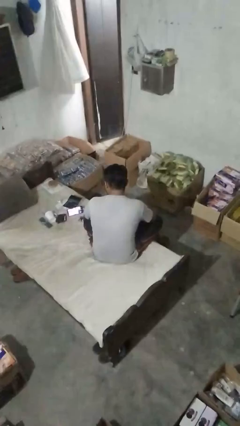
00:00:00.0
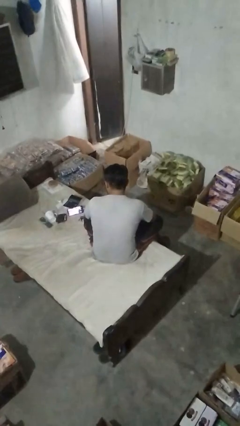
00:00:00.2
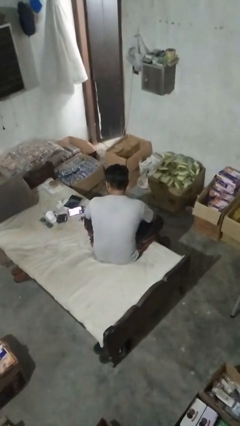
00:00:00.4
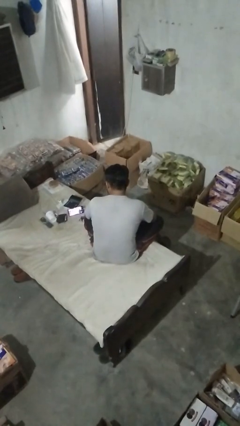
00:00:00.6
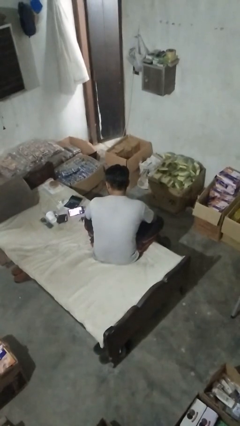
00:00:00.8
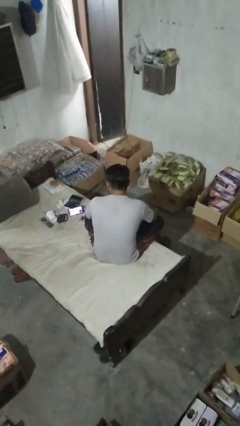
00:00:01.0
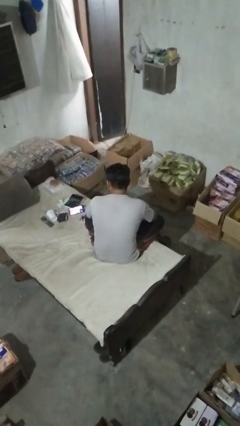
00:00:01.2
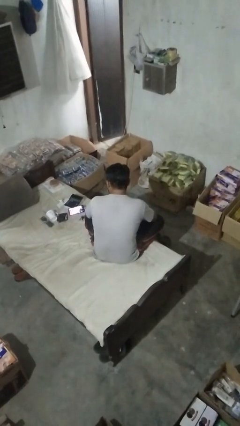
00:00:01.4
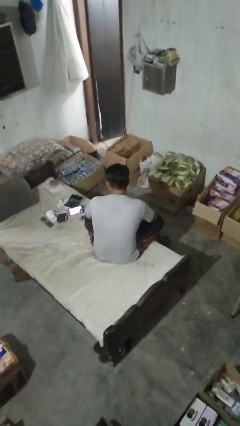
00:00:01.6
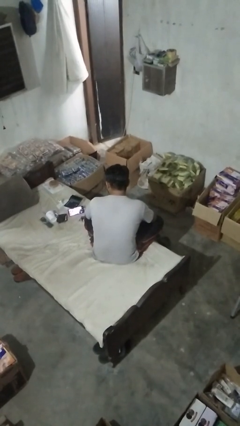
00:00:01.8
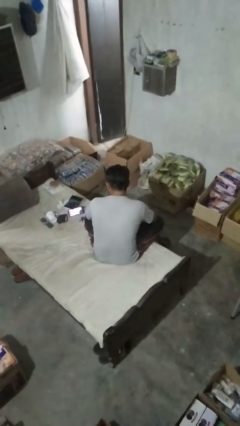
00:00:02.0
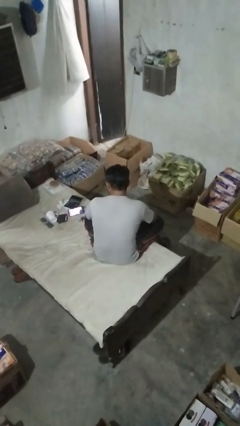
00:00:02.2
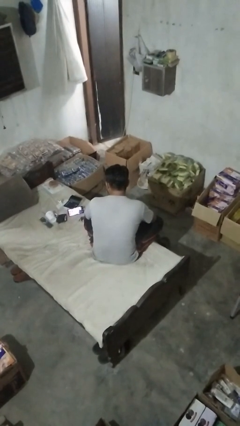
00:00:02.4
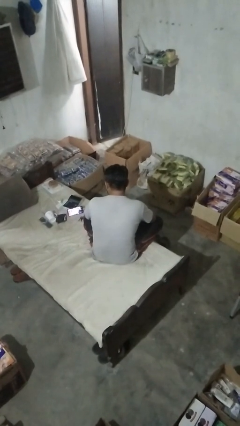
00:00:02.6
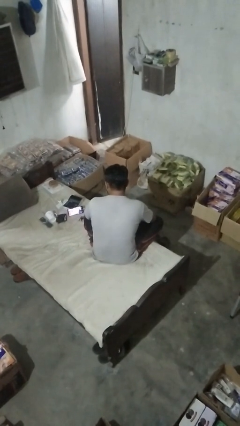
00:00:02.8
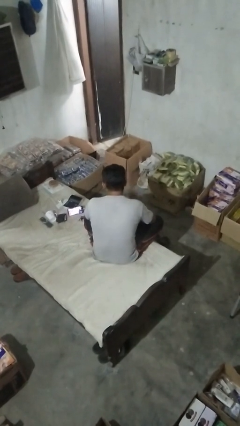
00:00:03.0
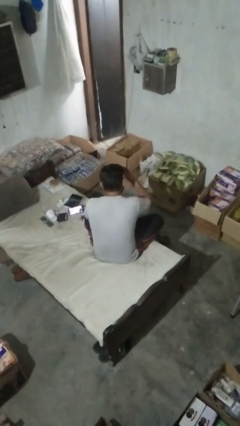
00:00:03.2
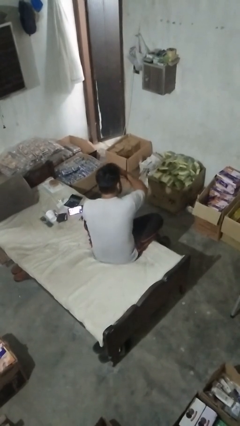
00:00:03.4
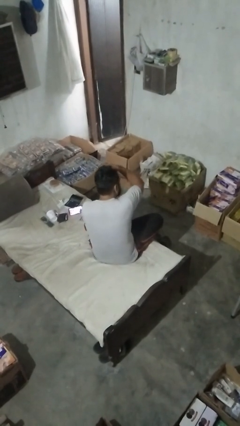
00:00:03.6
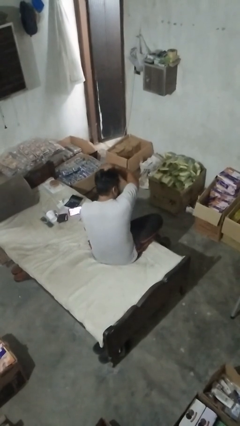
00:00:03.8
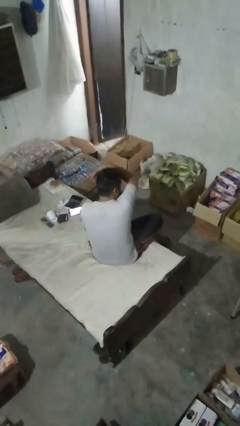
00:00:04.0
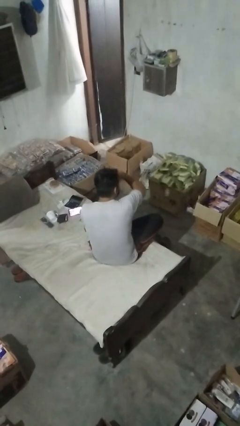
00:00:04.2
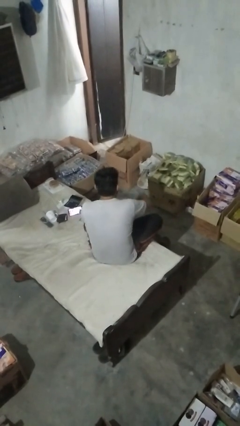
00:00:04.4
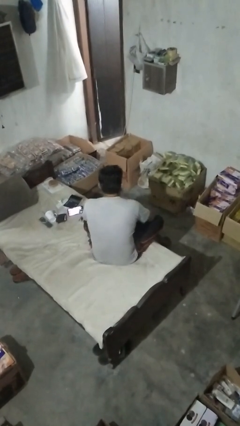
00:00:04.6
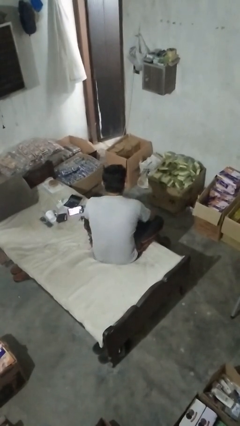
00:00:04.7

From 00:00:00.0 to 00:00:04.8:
person strokes hair

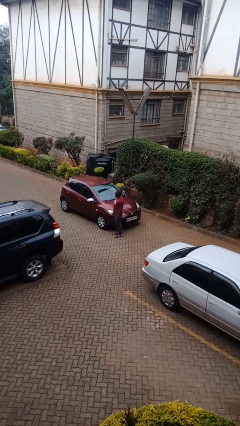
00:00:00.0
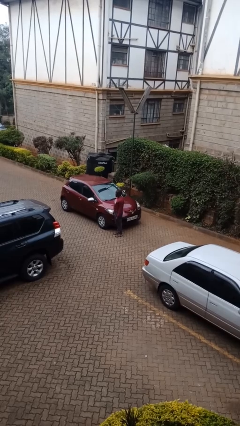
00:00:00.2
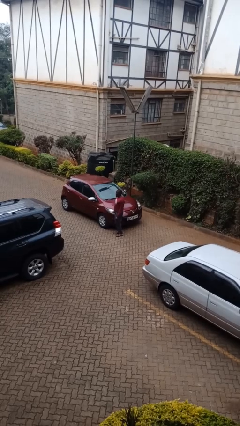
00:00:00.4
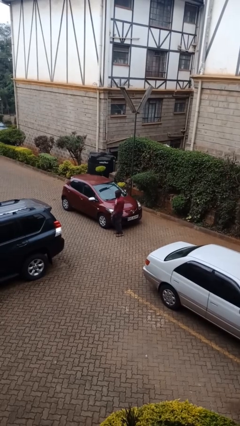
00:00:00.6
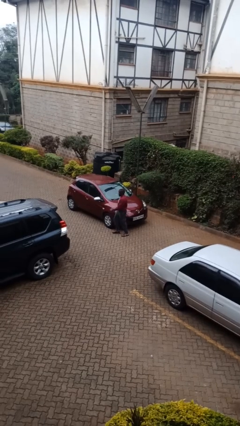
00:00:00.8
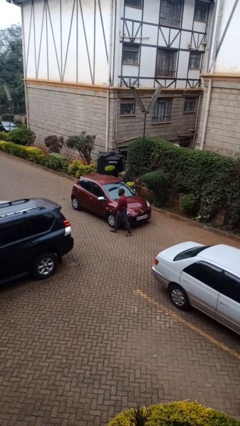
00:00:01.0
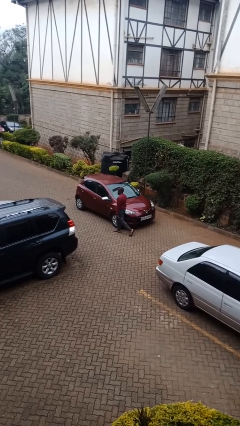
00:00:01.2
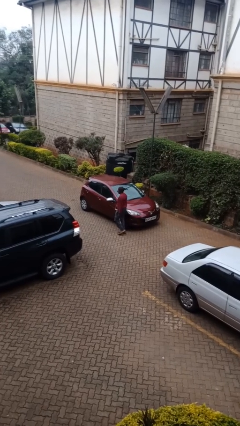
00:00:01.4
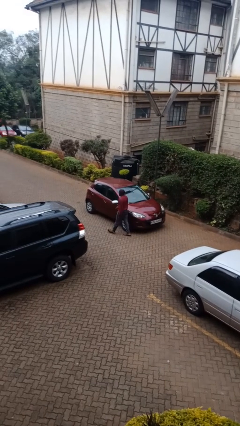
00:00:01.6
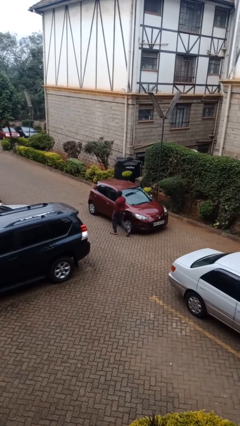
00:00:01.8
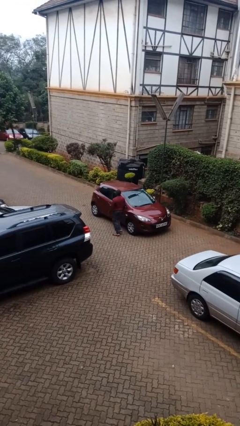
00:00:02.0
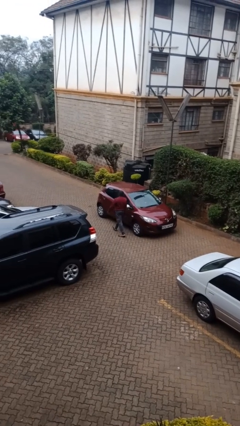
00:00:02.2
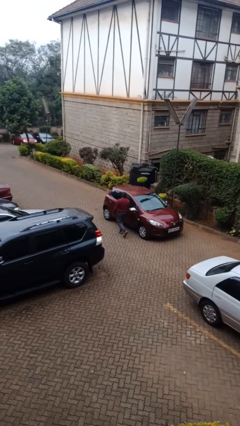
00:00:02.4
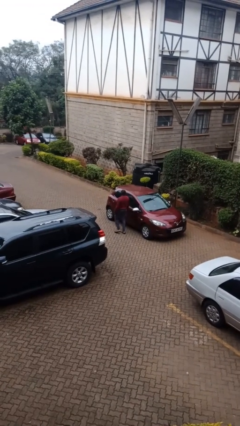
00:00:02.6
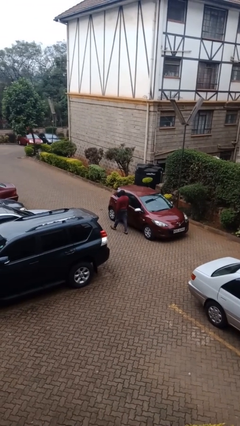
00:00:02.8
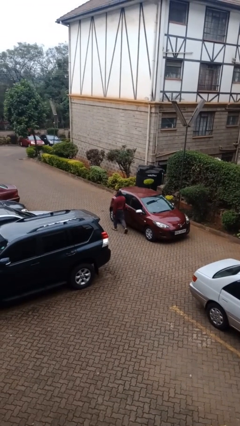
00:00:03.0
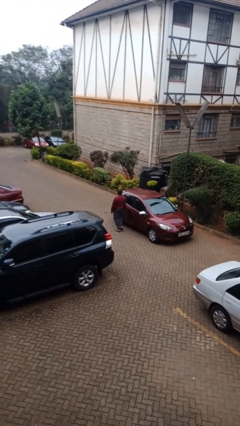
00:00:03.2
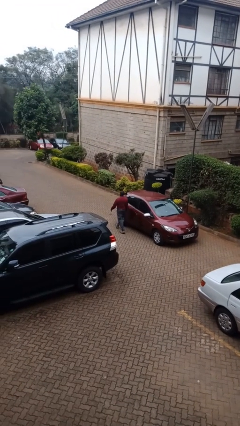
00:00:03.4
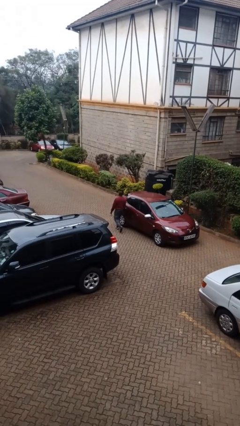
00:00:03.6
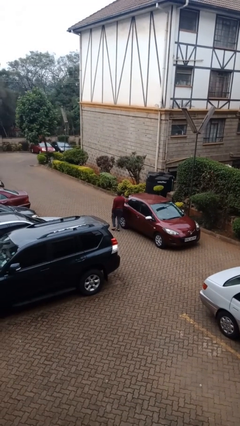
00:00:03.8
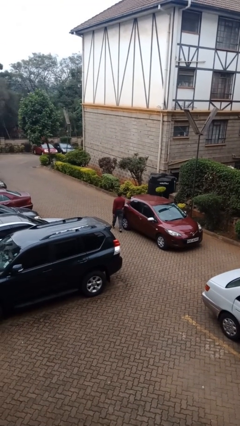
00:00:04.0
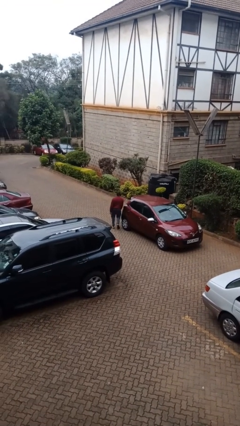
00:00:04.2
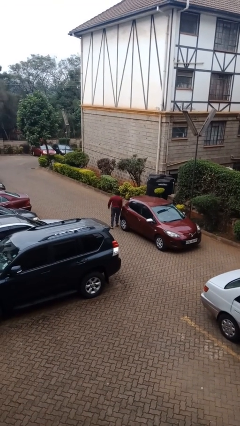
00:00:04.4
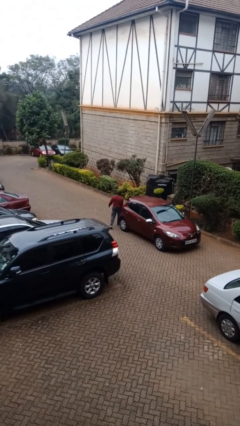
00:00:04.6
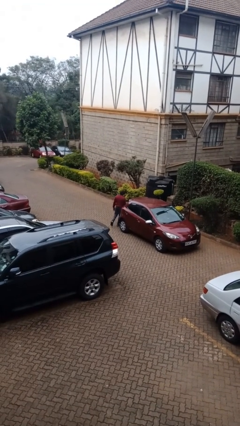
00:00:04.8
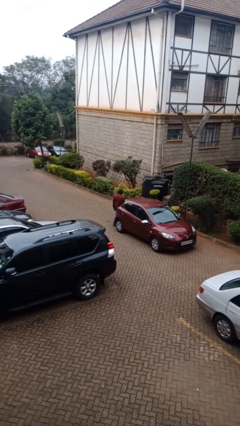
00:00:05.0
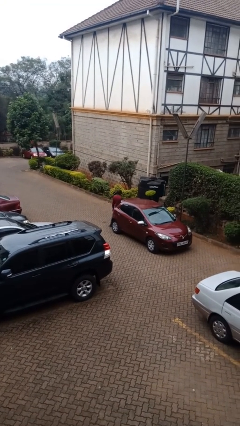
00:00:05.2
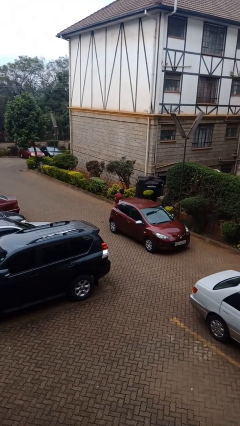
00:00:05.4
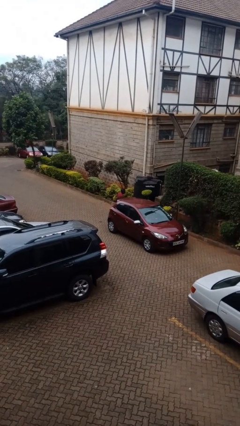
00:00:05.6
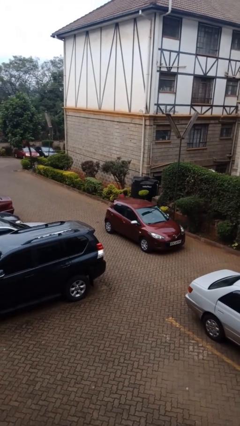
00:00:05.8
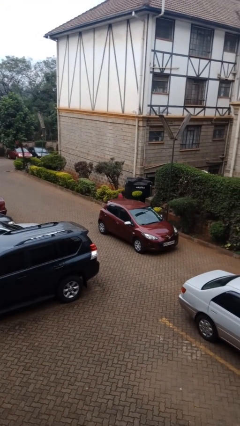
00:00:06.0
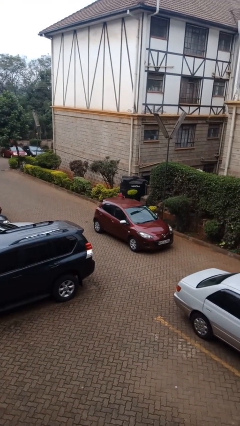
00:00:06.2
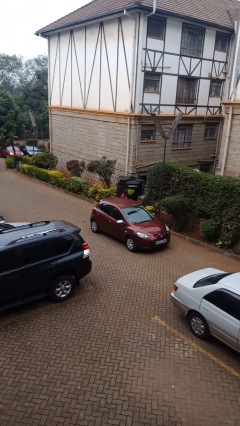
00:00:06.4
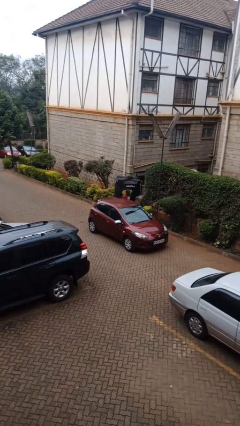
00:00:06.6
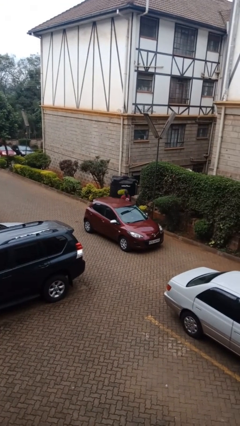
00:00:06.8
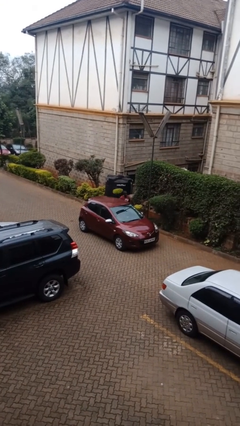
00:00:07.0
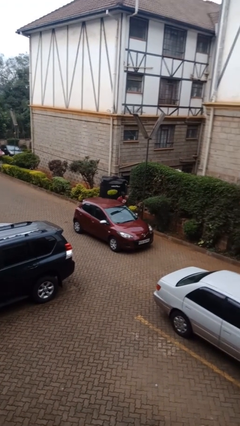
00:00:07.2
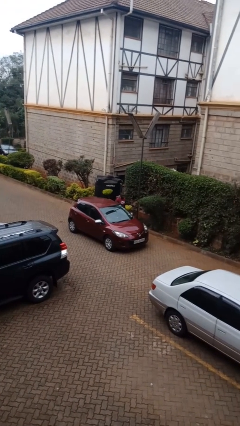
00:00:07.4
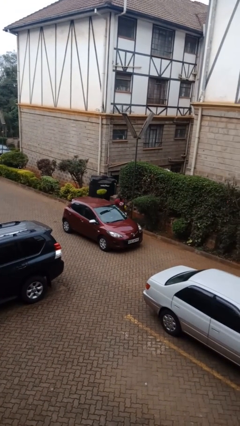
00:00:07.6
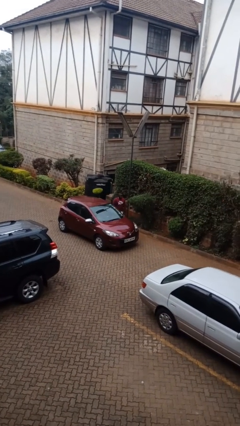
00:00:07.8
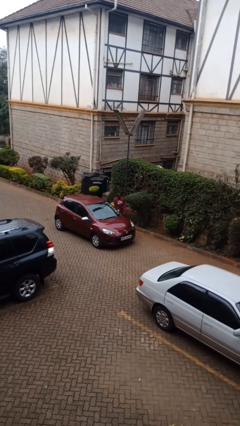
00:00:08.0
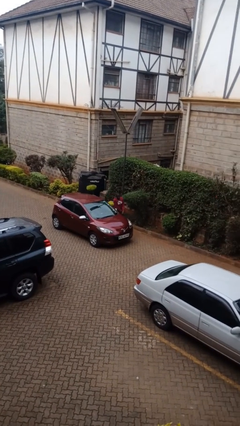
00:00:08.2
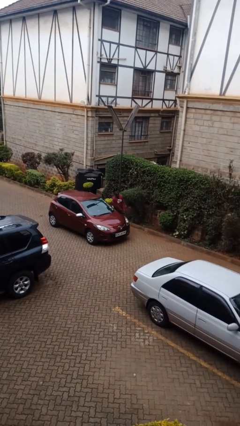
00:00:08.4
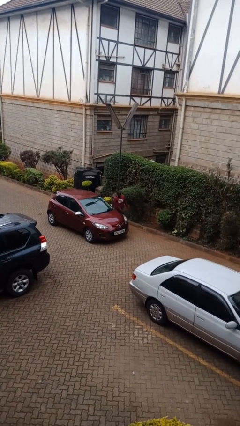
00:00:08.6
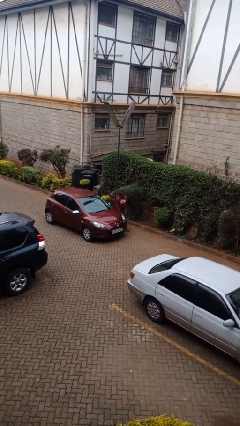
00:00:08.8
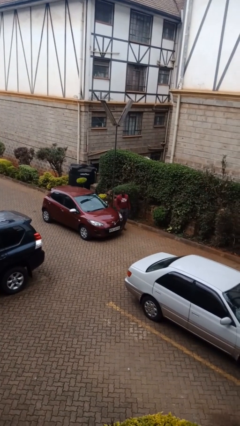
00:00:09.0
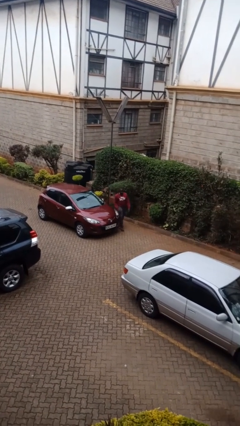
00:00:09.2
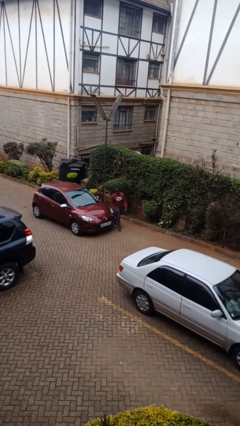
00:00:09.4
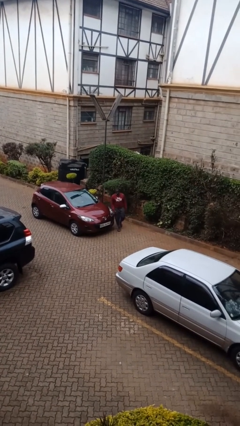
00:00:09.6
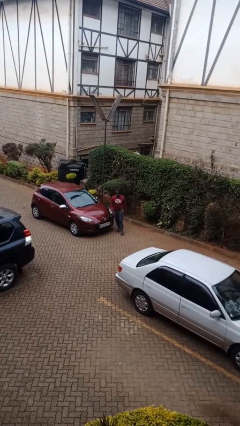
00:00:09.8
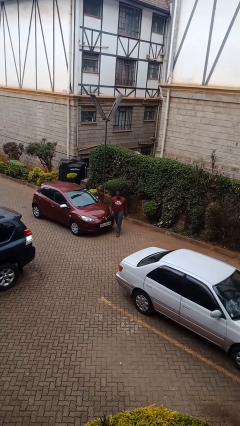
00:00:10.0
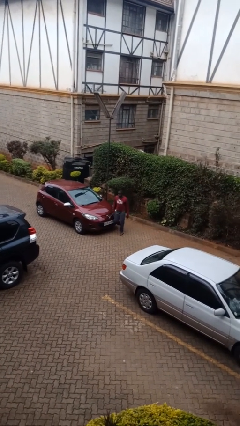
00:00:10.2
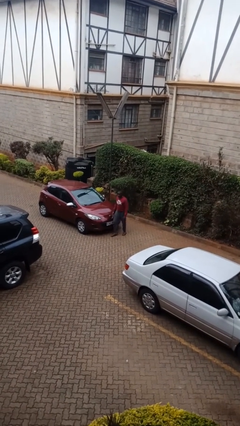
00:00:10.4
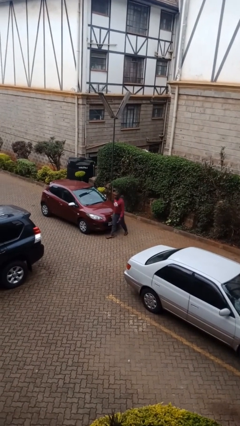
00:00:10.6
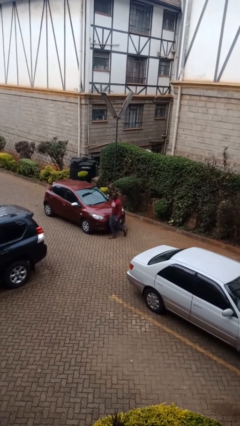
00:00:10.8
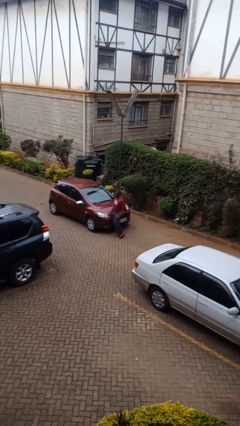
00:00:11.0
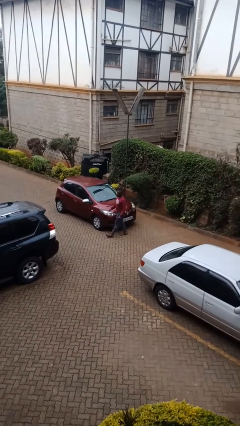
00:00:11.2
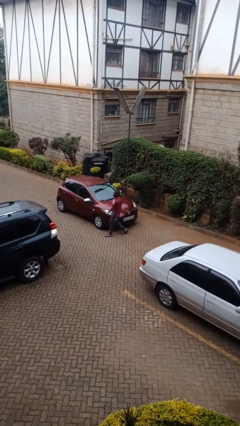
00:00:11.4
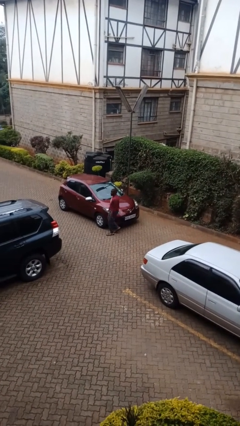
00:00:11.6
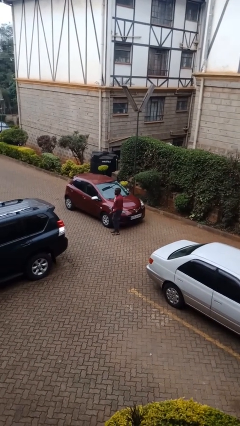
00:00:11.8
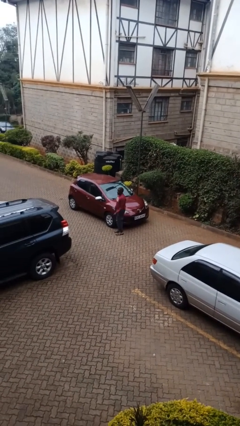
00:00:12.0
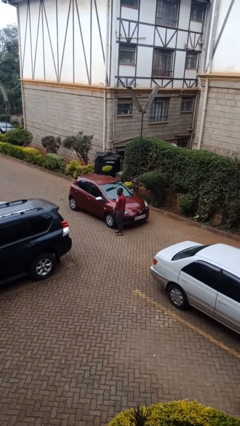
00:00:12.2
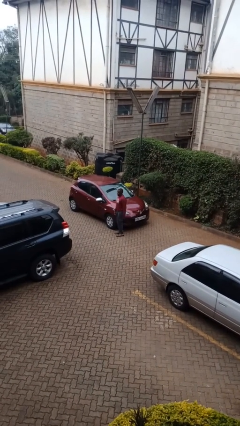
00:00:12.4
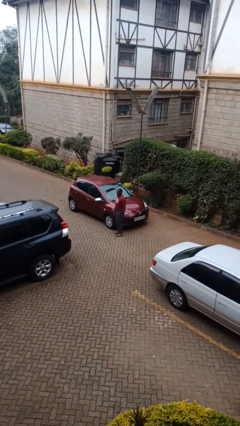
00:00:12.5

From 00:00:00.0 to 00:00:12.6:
person walks around car

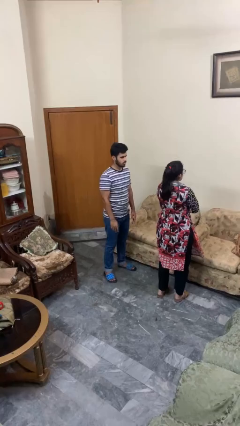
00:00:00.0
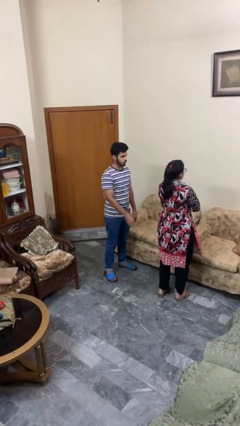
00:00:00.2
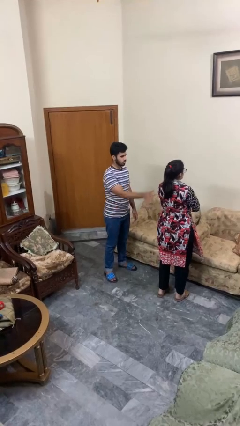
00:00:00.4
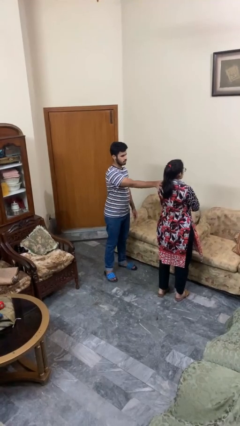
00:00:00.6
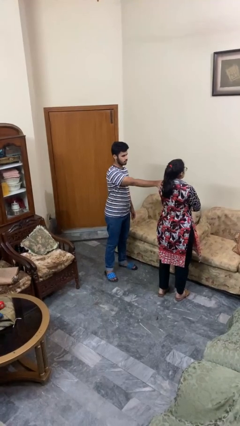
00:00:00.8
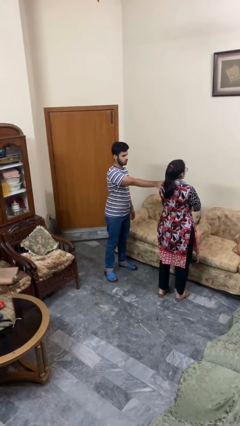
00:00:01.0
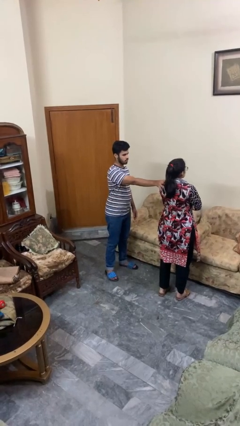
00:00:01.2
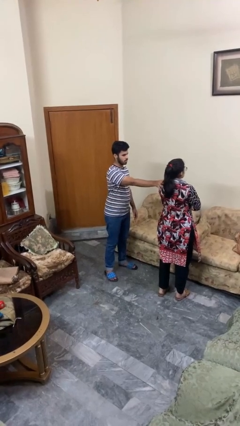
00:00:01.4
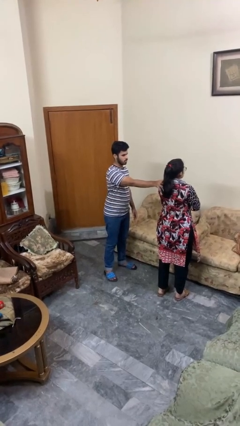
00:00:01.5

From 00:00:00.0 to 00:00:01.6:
person grabs person by shoulder
